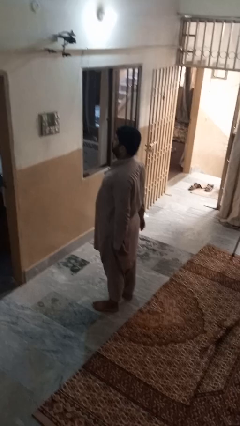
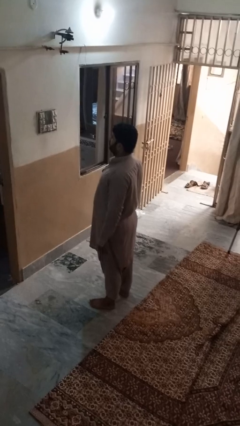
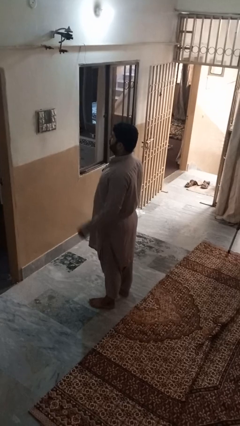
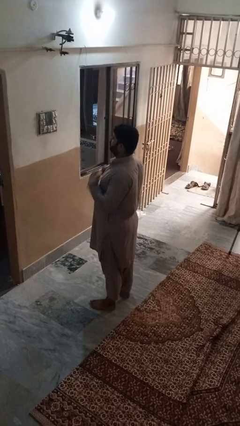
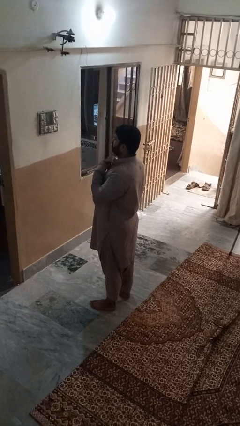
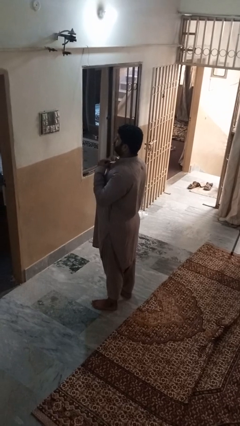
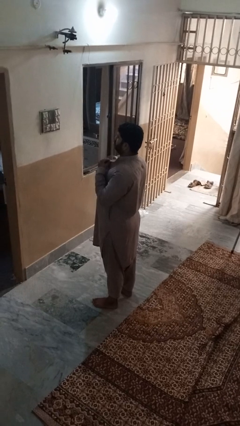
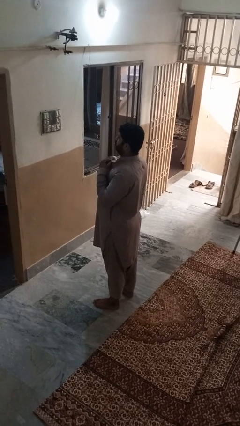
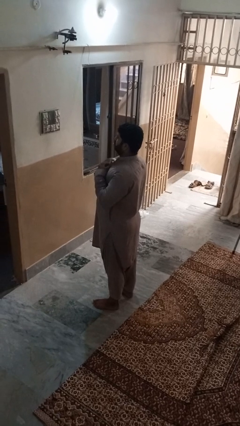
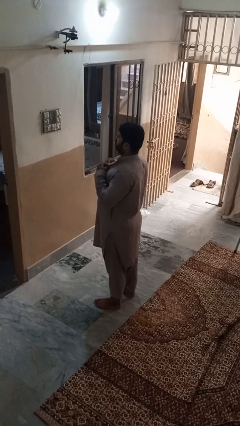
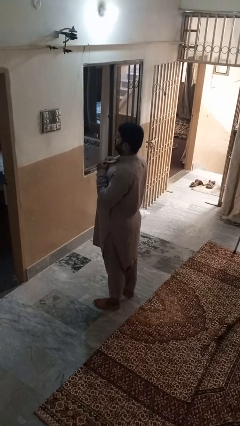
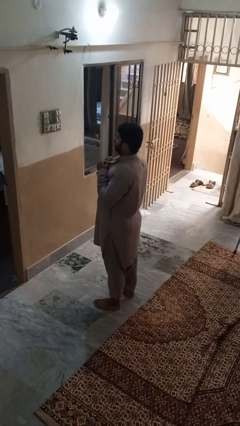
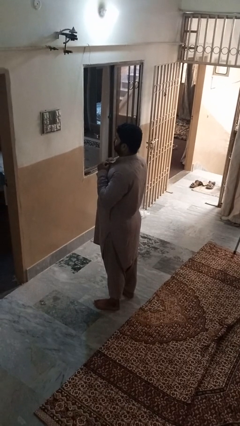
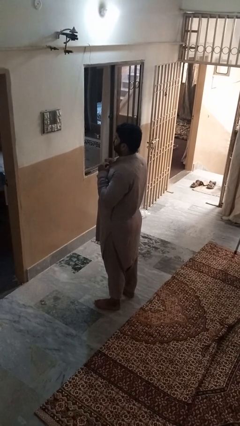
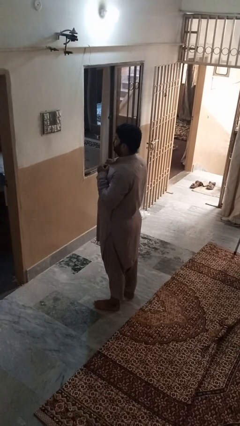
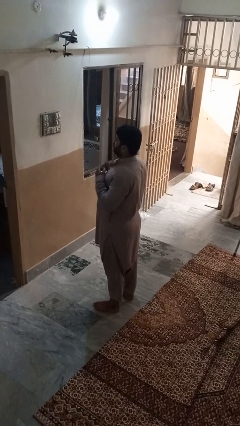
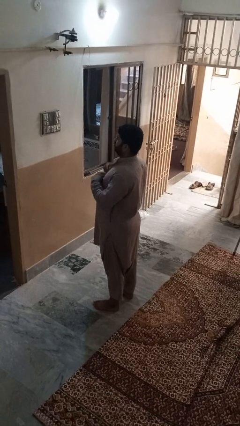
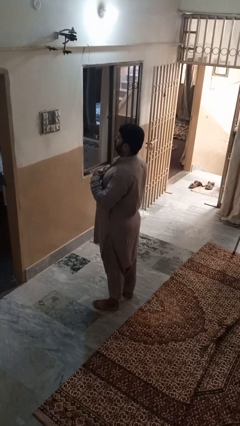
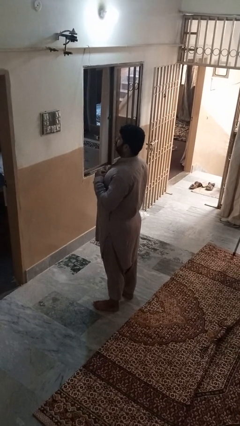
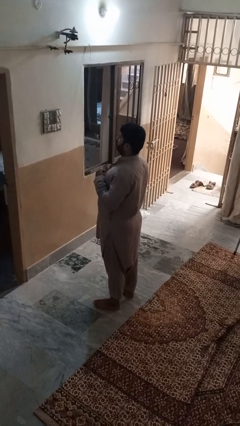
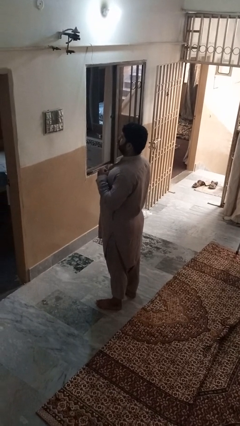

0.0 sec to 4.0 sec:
person buttons shirt

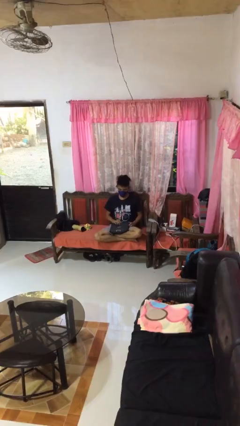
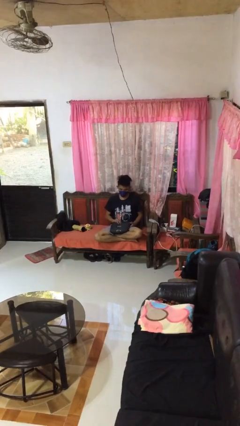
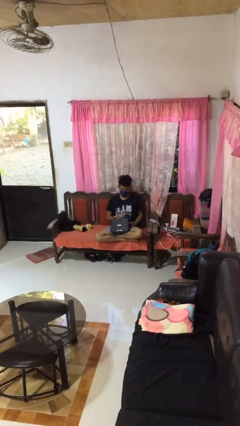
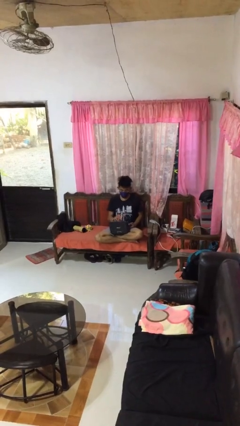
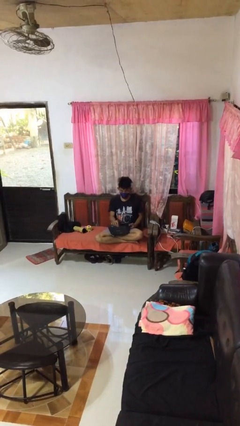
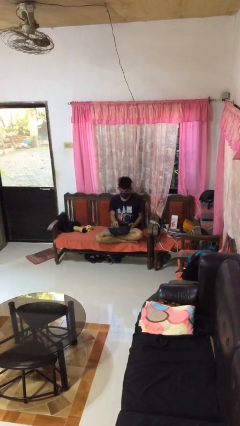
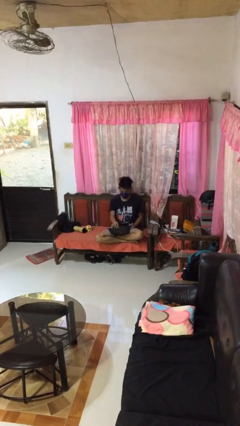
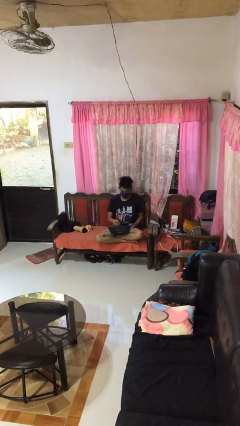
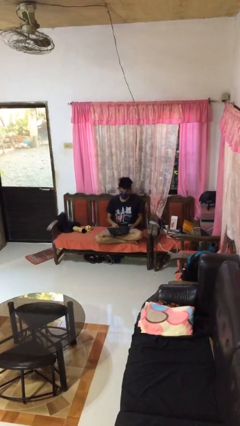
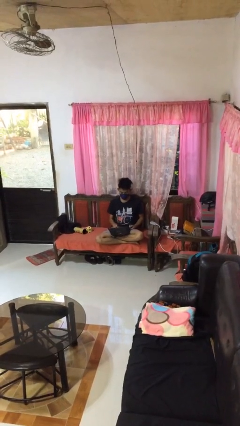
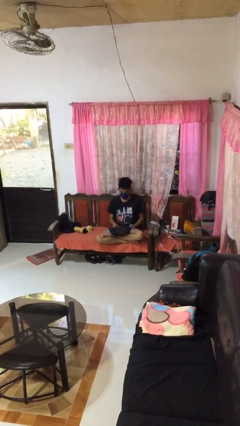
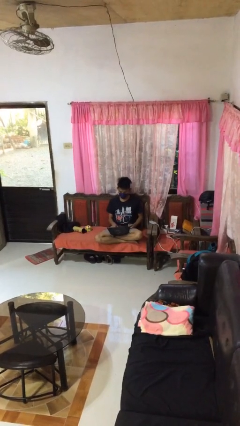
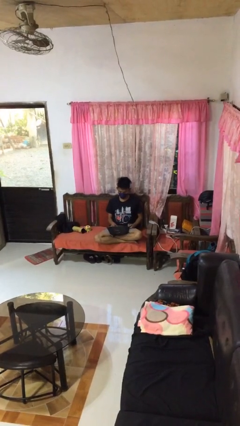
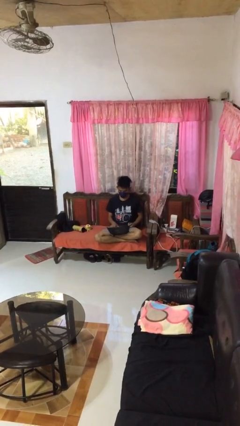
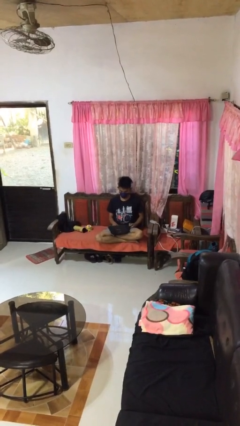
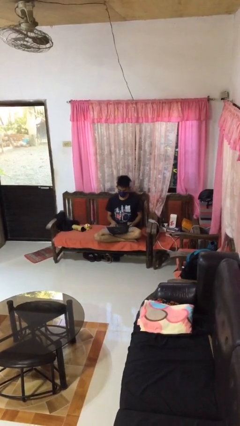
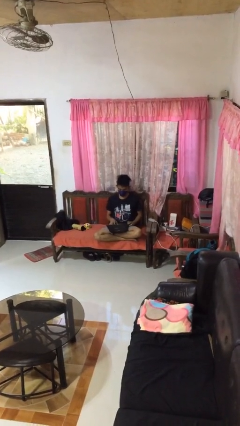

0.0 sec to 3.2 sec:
person opens laptop

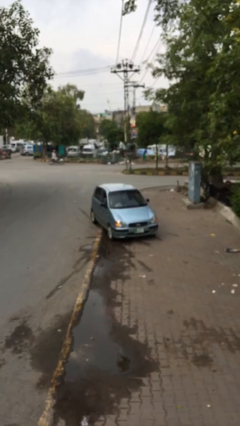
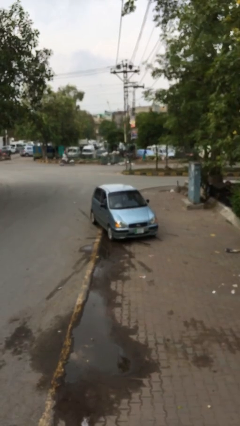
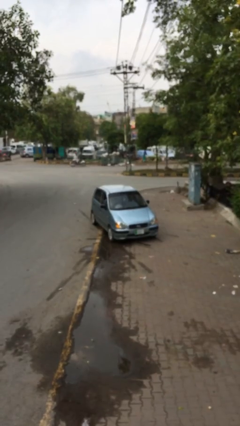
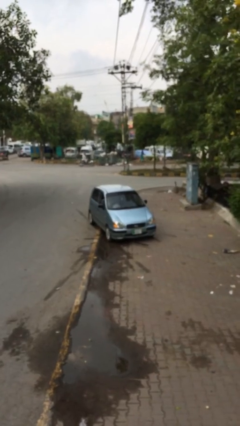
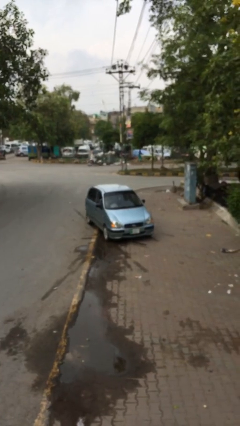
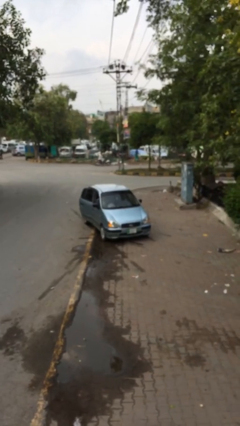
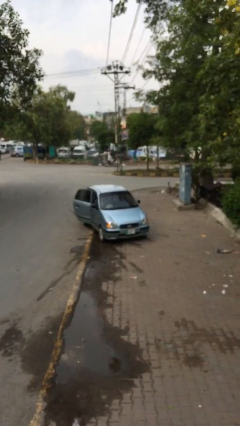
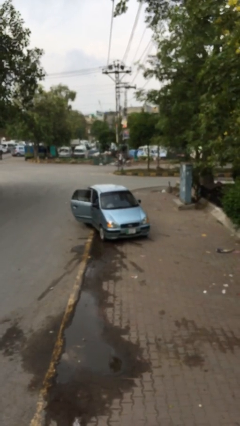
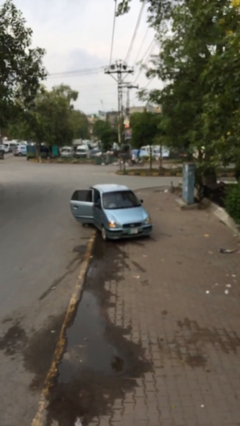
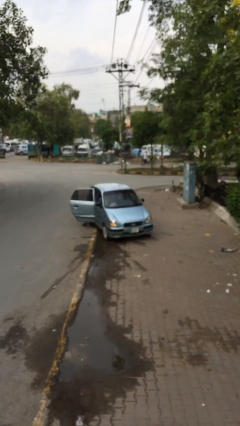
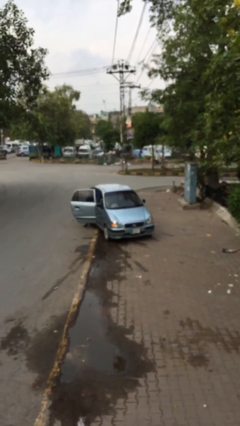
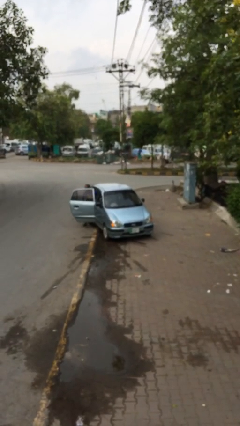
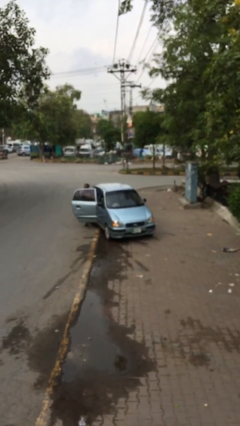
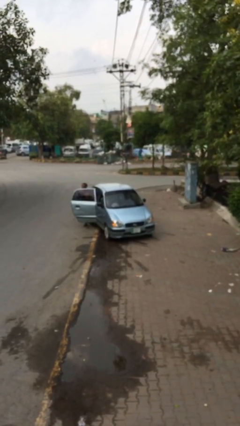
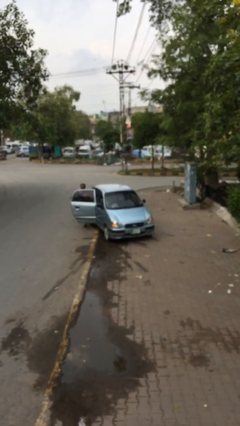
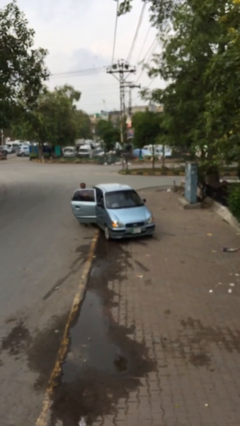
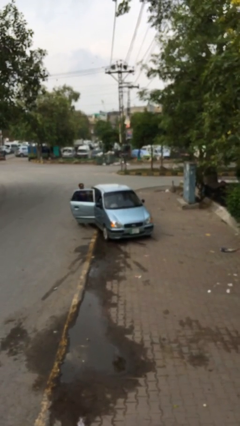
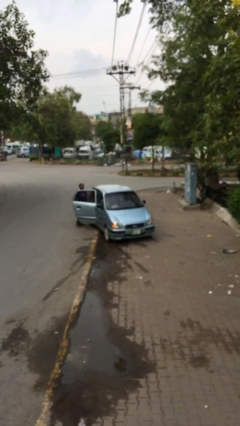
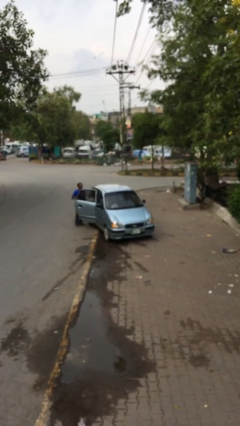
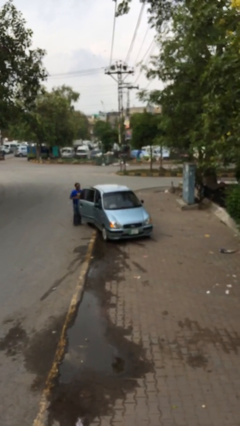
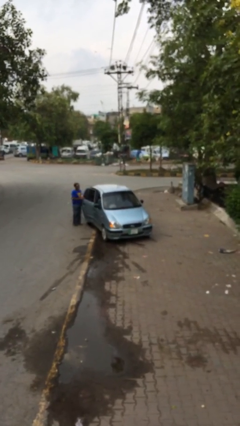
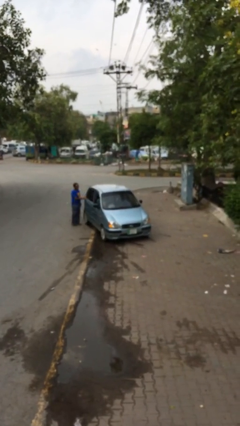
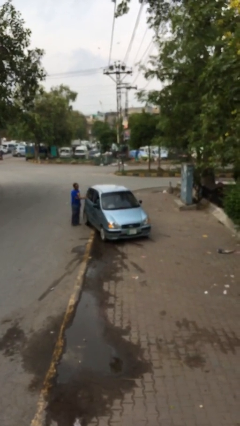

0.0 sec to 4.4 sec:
car drops off person

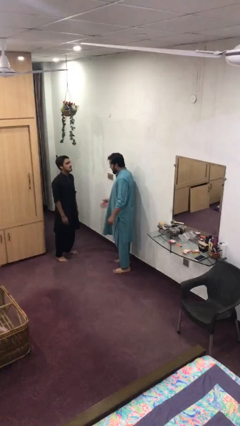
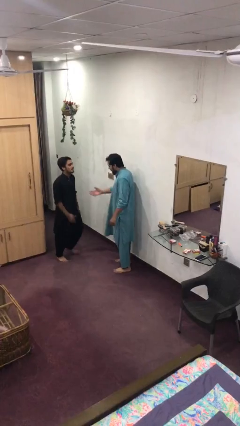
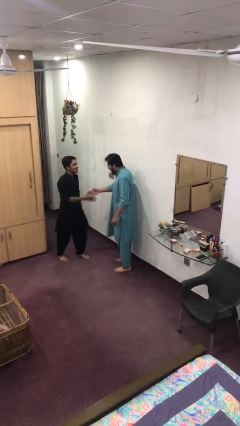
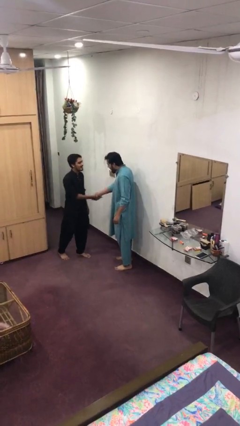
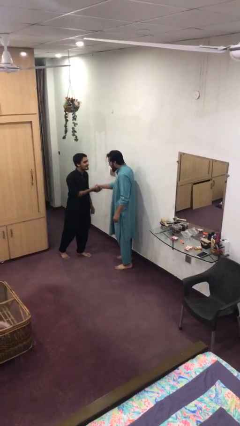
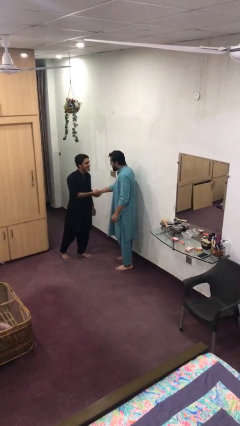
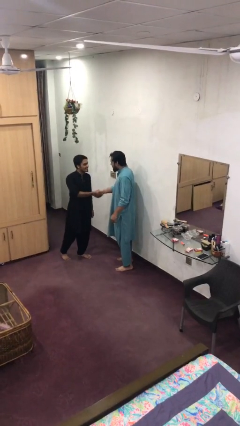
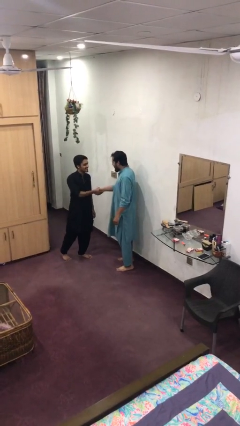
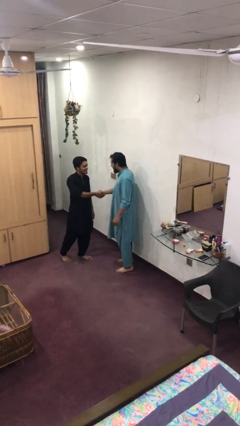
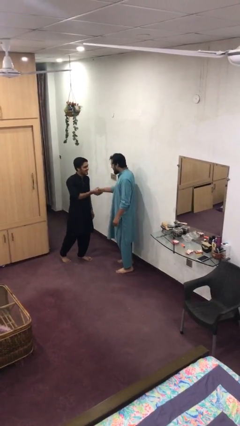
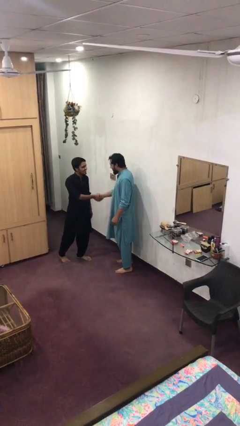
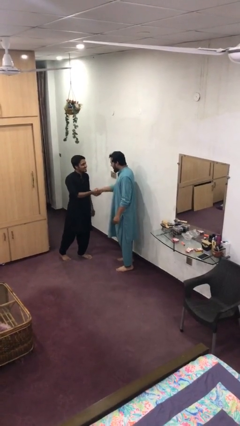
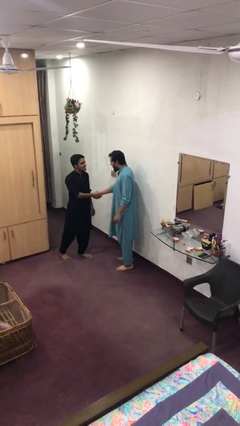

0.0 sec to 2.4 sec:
person shakes hand

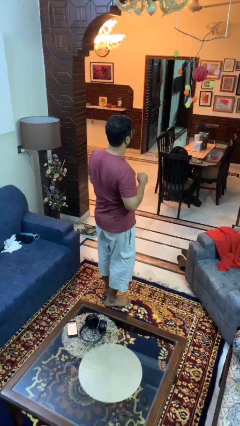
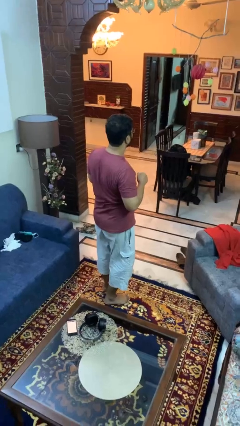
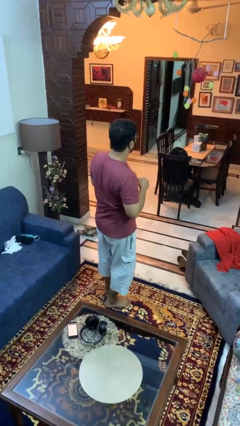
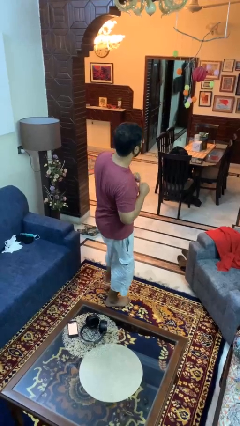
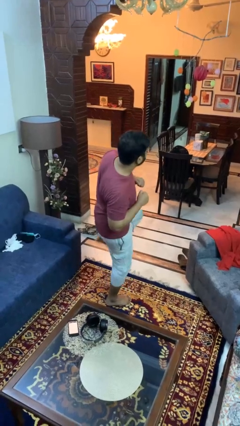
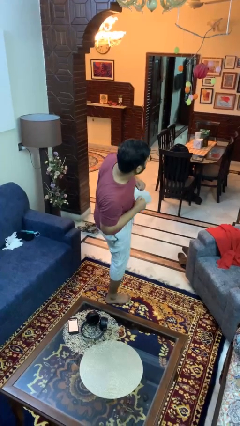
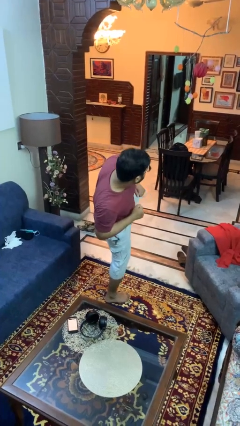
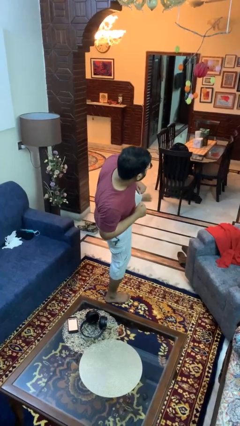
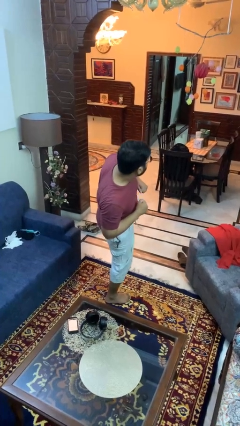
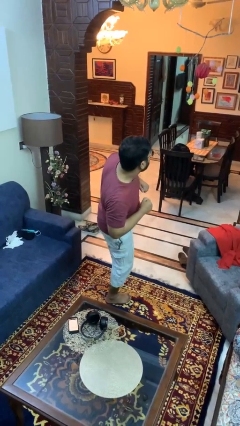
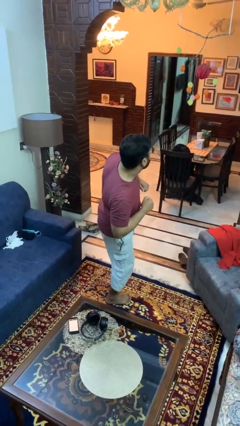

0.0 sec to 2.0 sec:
person karate kicks

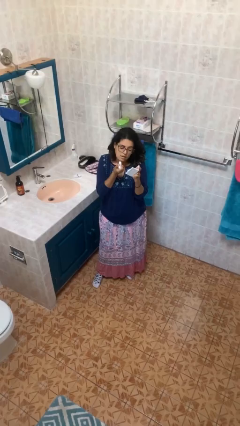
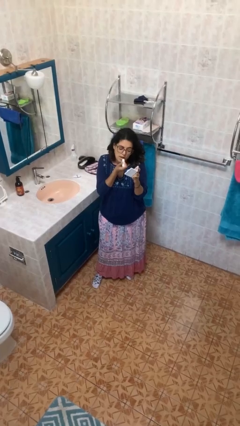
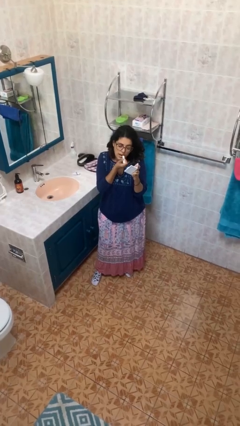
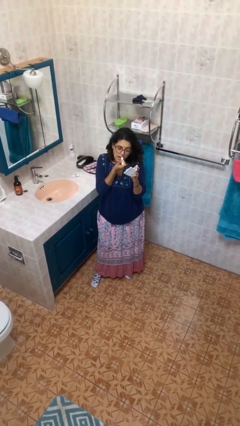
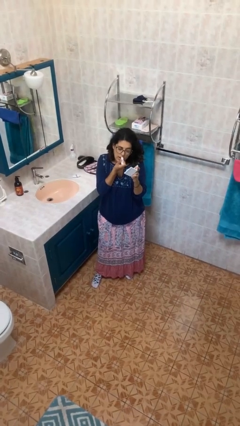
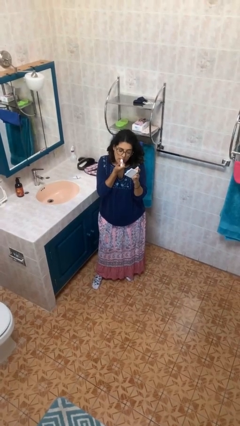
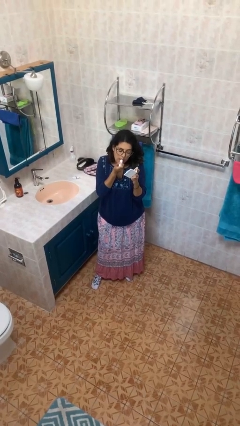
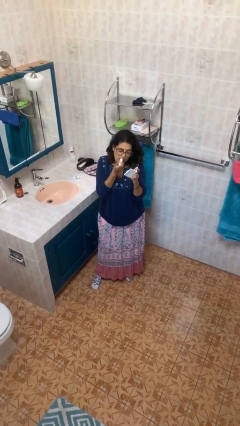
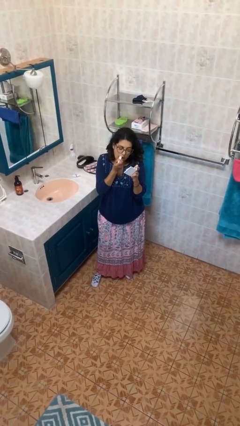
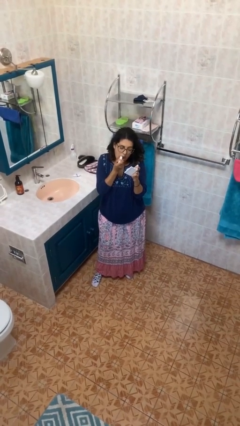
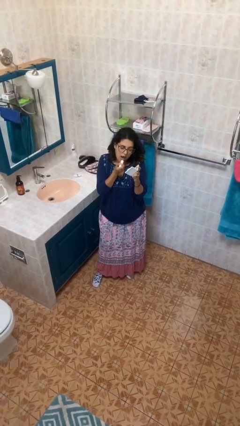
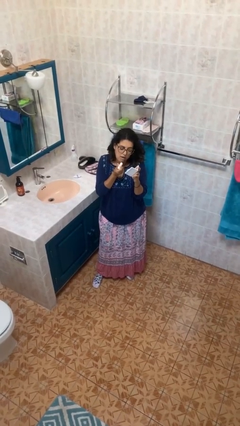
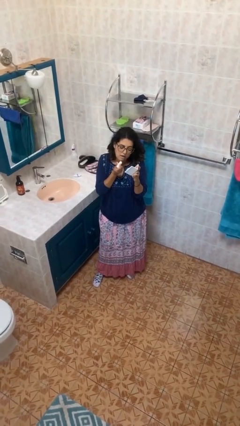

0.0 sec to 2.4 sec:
person applies lip makeup
